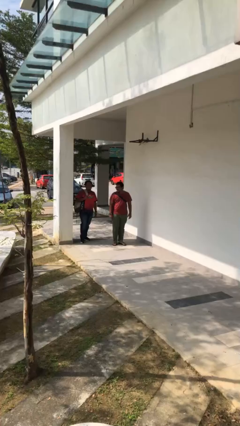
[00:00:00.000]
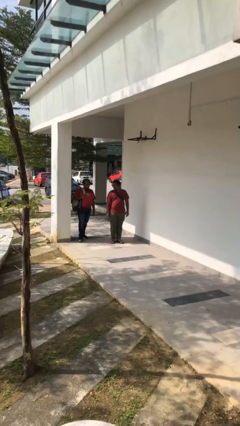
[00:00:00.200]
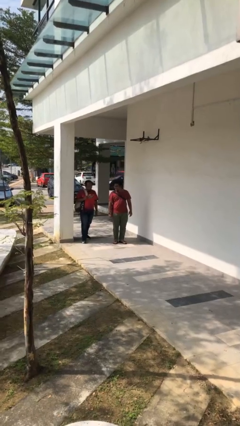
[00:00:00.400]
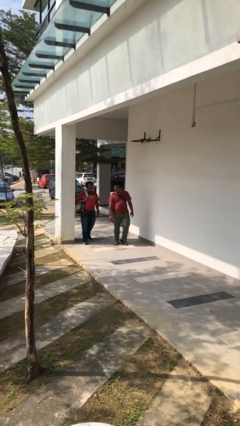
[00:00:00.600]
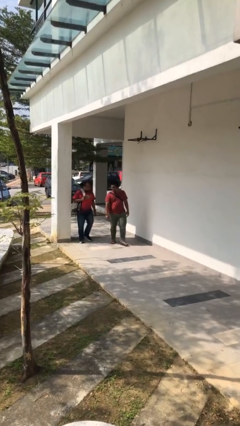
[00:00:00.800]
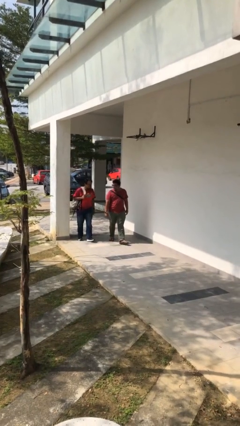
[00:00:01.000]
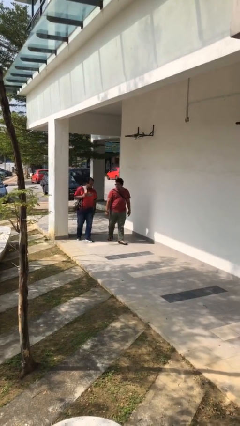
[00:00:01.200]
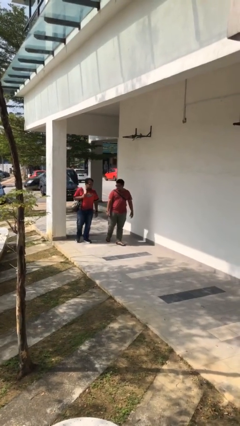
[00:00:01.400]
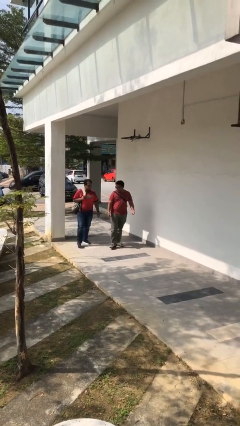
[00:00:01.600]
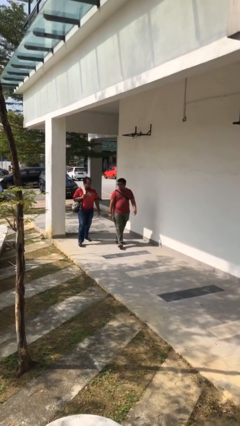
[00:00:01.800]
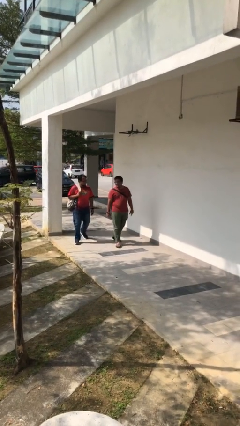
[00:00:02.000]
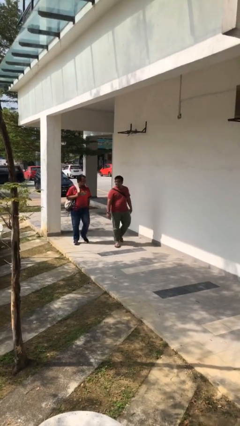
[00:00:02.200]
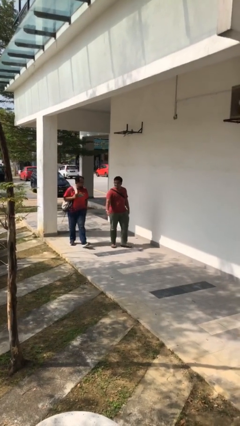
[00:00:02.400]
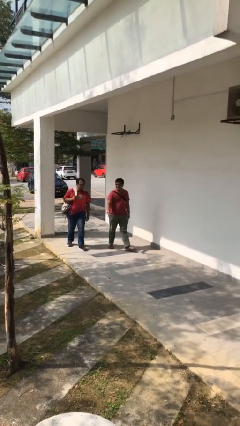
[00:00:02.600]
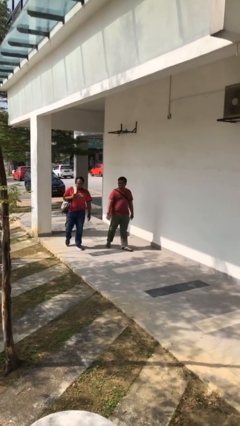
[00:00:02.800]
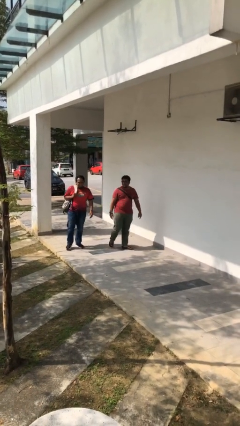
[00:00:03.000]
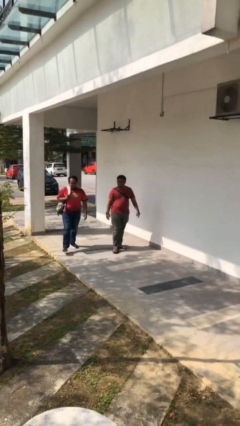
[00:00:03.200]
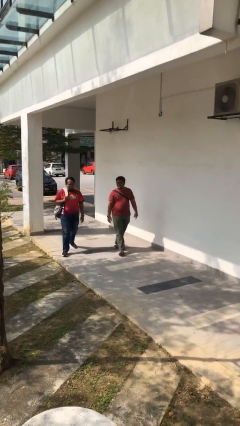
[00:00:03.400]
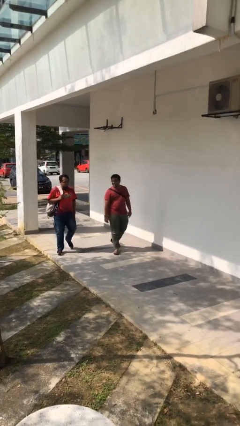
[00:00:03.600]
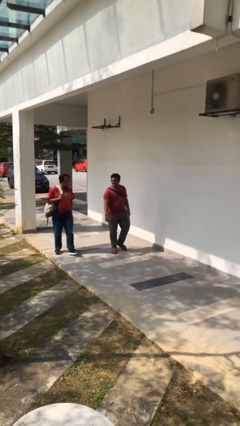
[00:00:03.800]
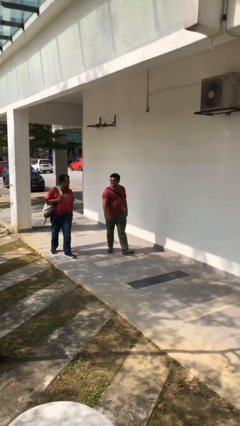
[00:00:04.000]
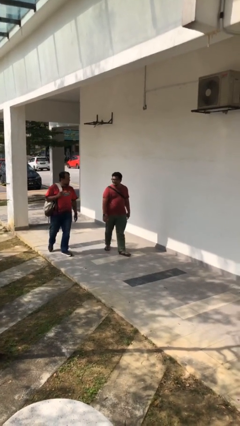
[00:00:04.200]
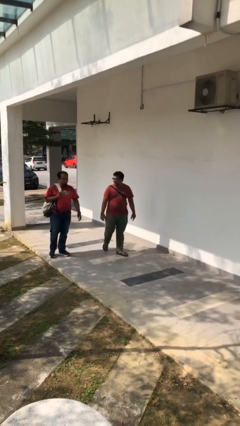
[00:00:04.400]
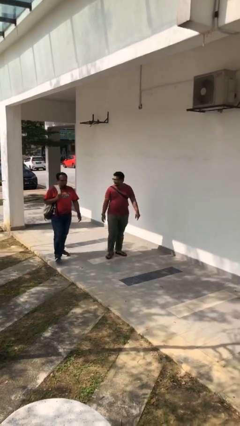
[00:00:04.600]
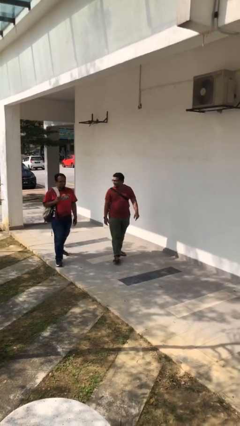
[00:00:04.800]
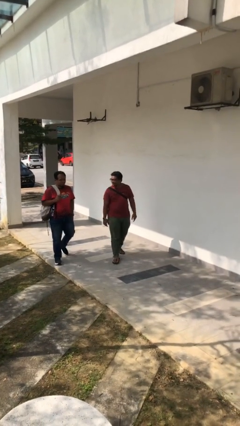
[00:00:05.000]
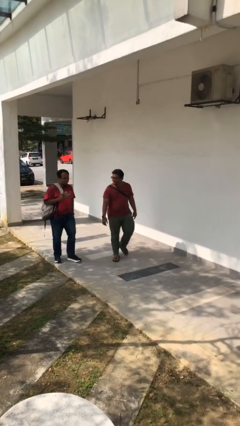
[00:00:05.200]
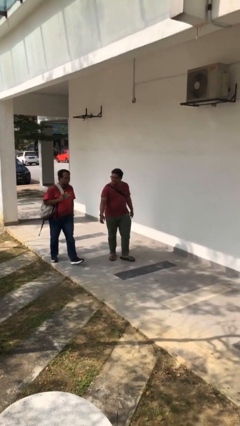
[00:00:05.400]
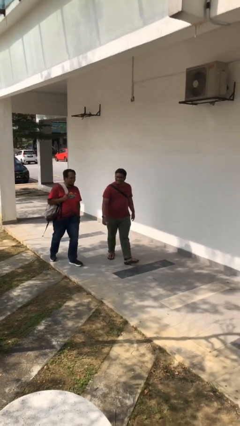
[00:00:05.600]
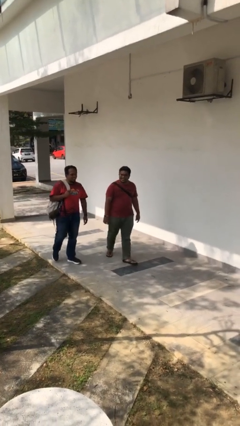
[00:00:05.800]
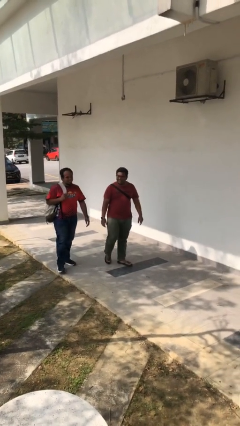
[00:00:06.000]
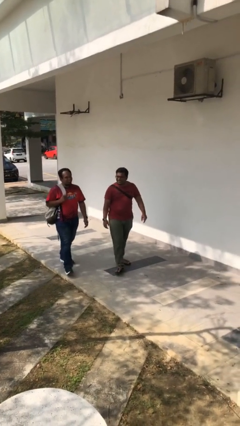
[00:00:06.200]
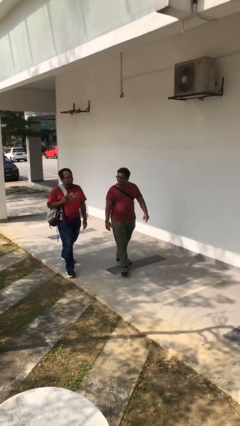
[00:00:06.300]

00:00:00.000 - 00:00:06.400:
person talks to person

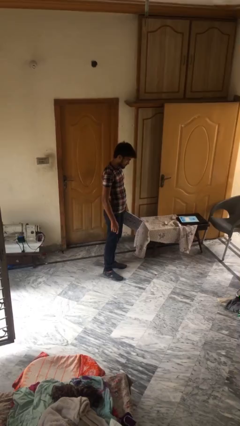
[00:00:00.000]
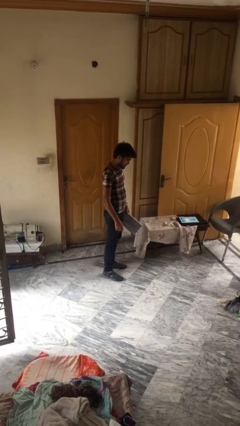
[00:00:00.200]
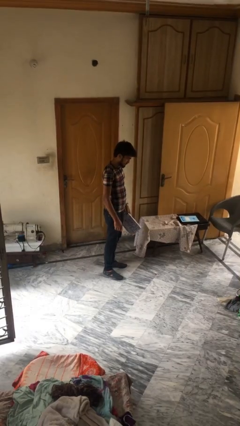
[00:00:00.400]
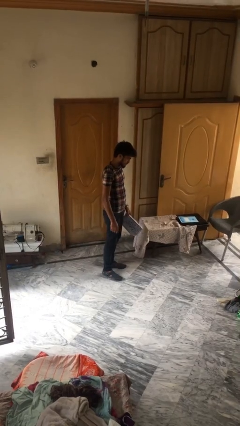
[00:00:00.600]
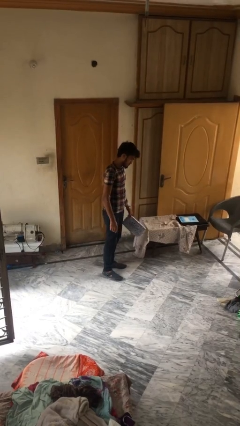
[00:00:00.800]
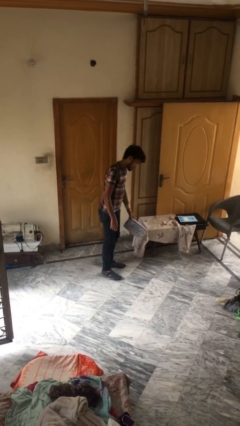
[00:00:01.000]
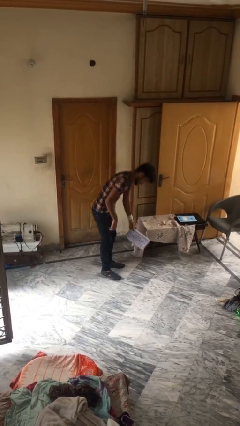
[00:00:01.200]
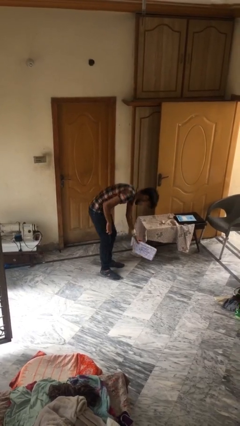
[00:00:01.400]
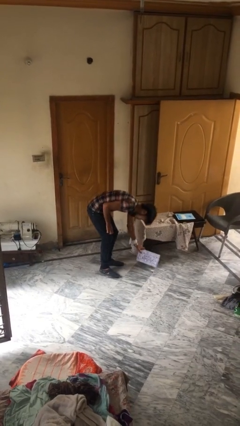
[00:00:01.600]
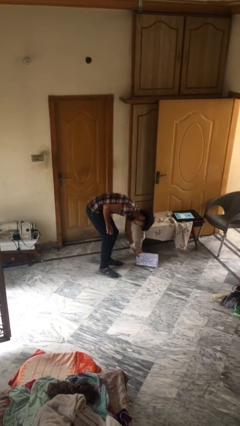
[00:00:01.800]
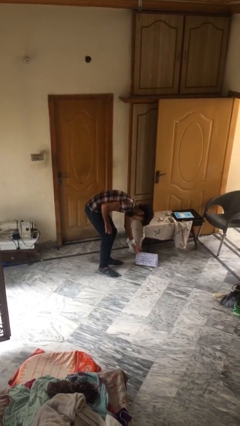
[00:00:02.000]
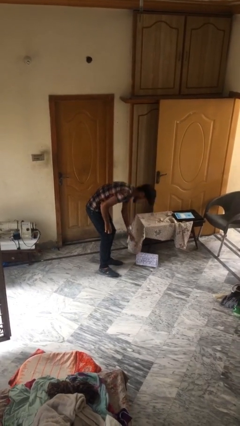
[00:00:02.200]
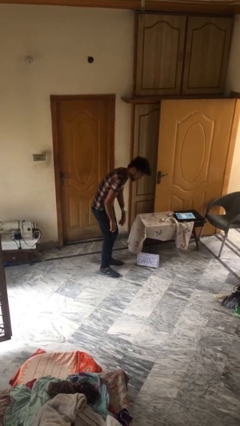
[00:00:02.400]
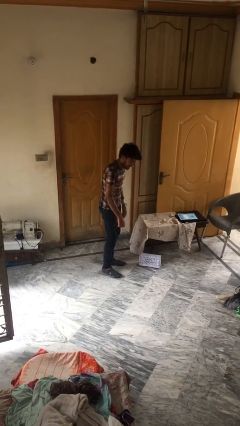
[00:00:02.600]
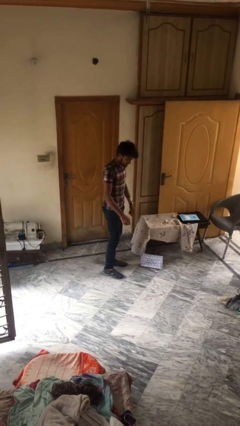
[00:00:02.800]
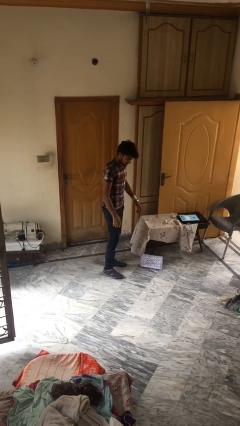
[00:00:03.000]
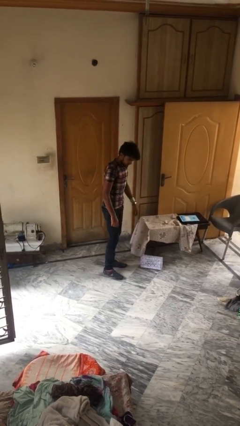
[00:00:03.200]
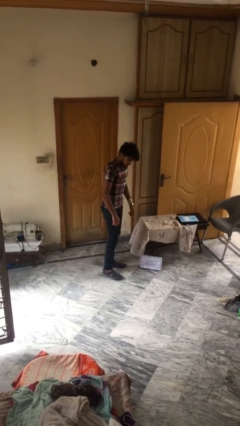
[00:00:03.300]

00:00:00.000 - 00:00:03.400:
person puts down object on floor

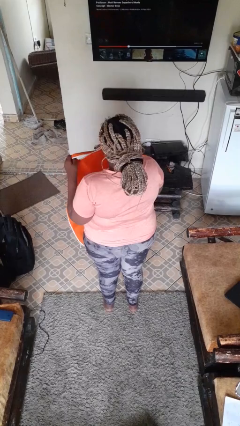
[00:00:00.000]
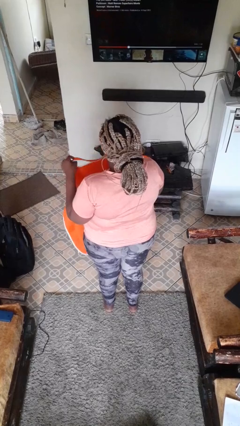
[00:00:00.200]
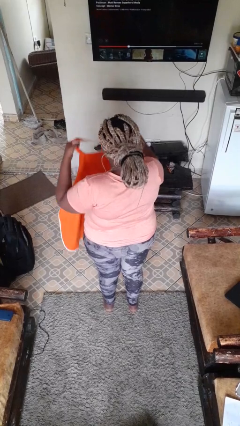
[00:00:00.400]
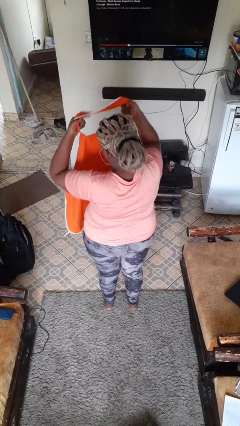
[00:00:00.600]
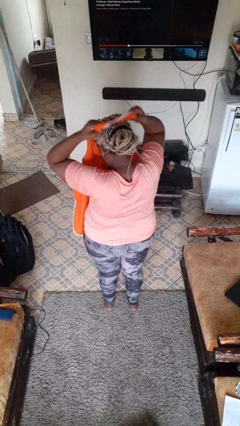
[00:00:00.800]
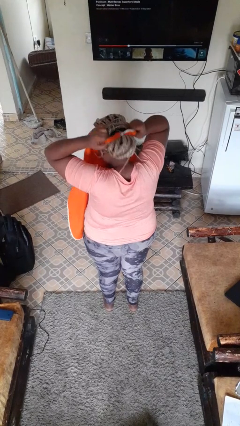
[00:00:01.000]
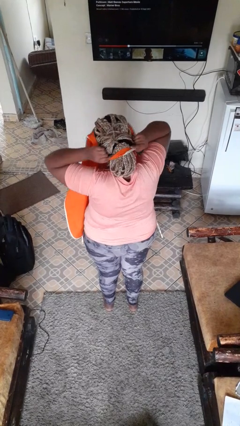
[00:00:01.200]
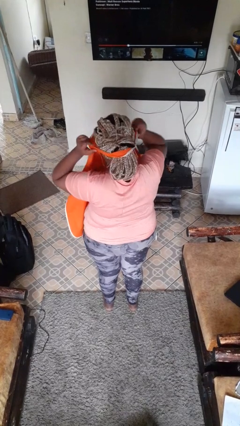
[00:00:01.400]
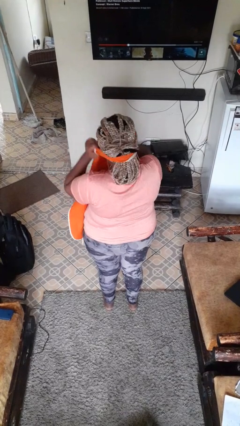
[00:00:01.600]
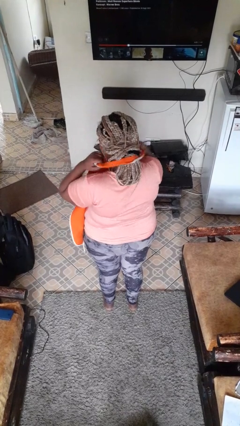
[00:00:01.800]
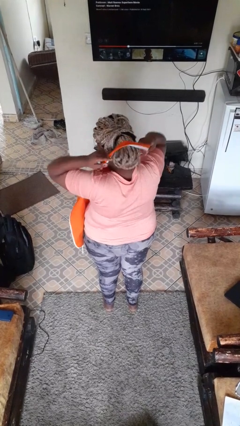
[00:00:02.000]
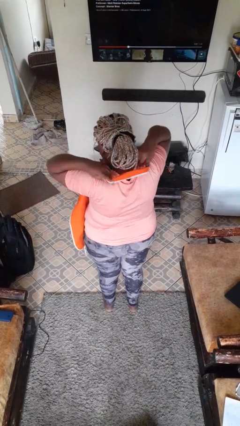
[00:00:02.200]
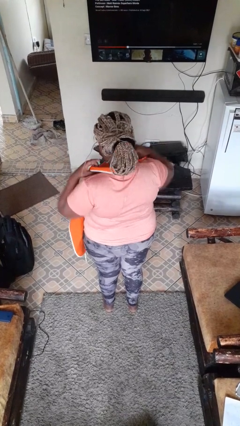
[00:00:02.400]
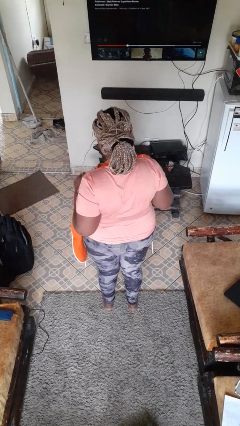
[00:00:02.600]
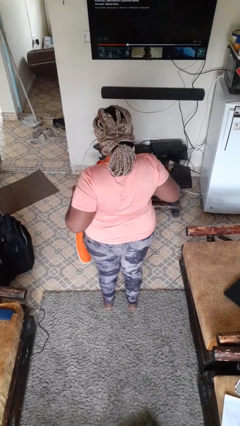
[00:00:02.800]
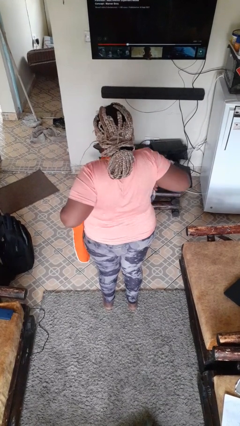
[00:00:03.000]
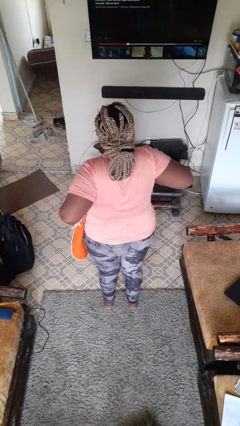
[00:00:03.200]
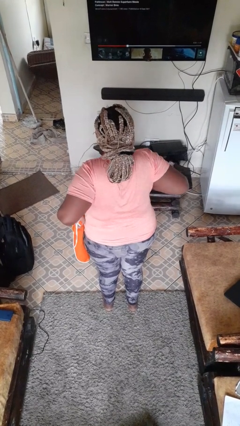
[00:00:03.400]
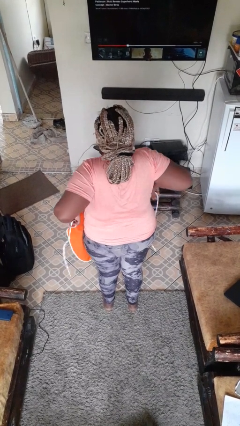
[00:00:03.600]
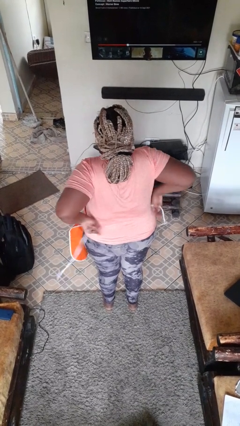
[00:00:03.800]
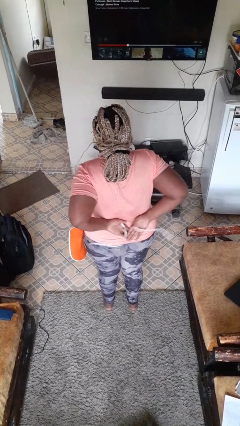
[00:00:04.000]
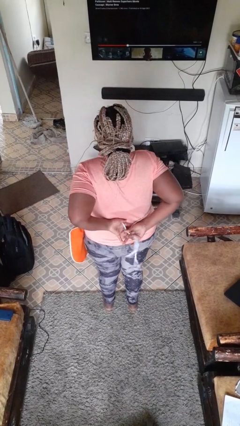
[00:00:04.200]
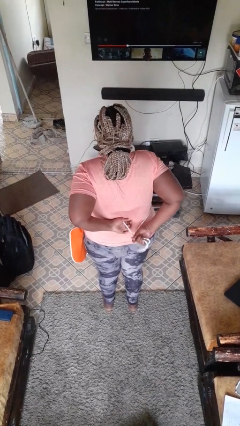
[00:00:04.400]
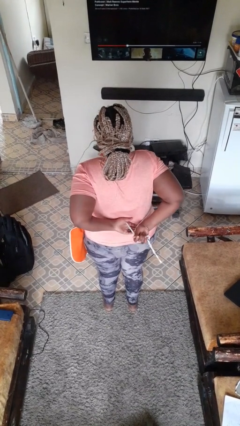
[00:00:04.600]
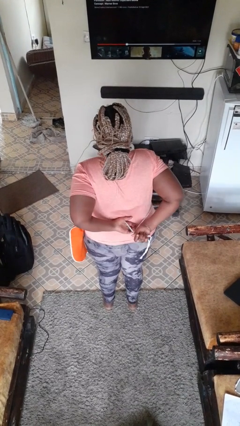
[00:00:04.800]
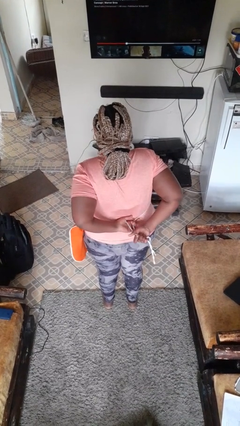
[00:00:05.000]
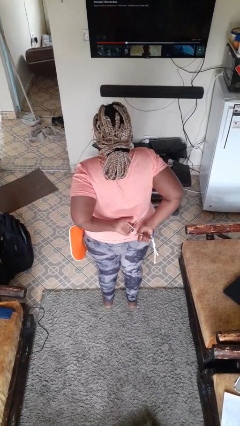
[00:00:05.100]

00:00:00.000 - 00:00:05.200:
person takes off apron

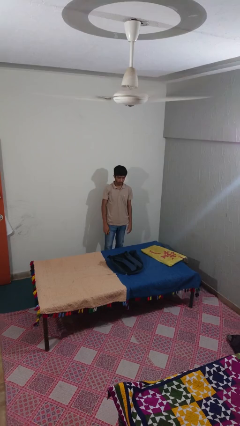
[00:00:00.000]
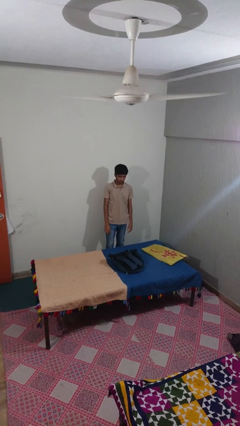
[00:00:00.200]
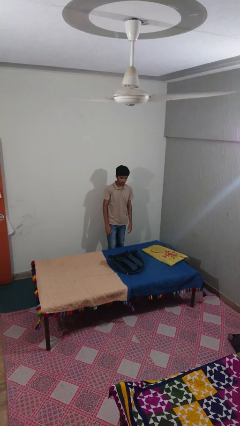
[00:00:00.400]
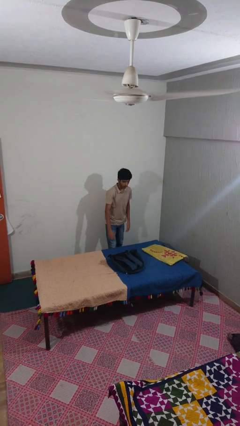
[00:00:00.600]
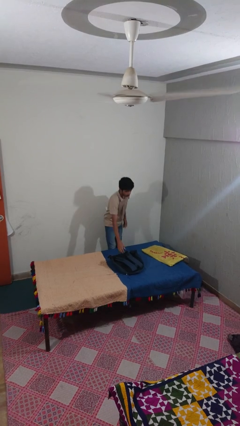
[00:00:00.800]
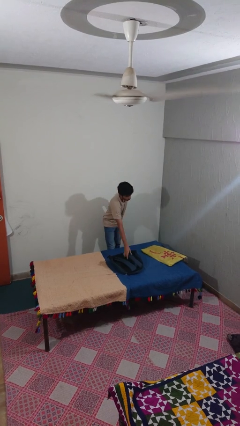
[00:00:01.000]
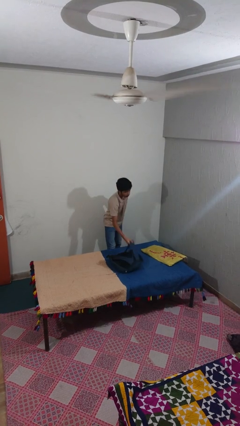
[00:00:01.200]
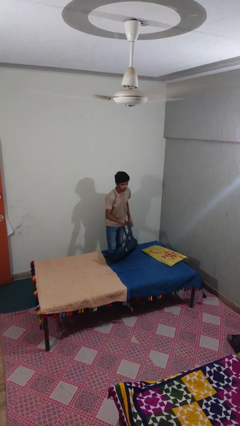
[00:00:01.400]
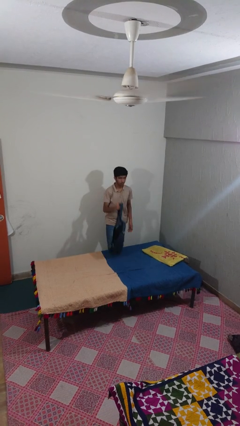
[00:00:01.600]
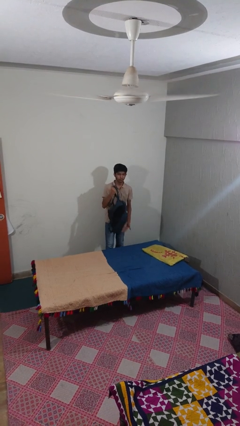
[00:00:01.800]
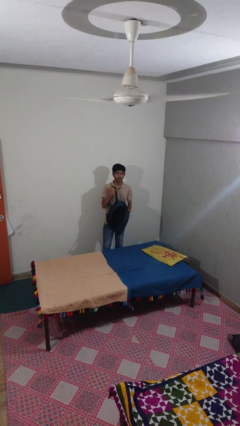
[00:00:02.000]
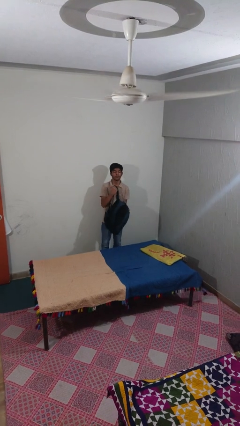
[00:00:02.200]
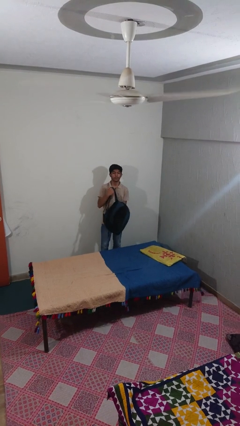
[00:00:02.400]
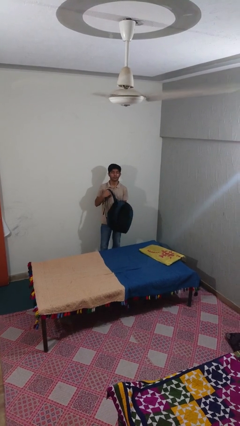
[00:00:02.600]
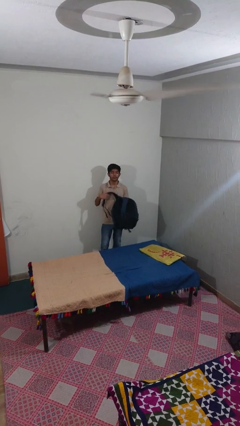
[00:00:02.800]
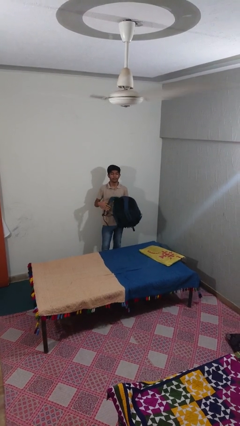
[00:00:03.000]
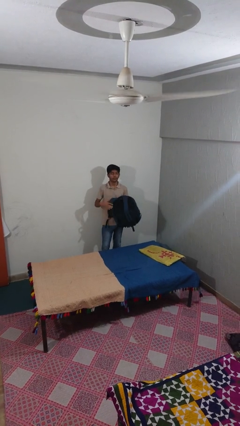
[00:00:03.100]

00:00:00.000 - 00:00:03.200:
person picks up object from bed
